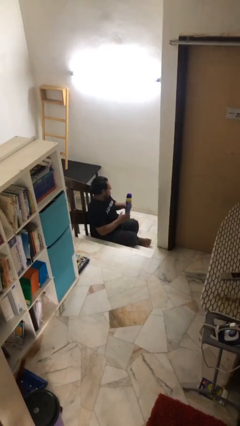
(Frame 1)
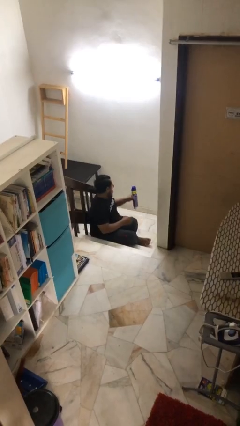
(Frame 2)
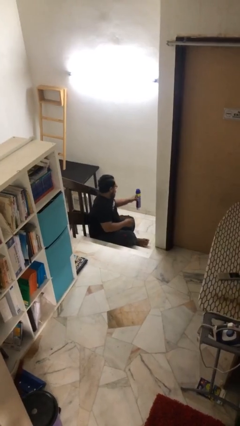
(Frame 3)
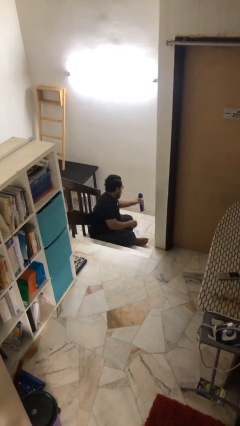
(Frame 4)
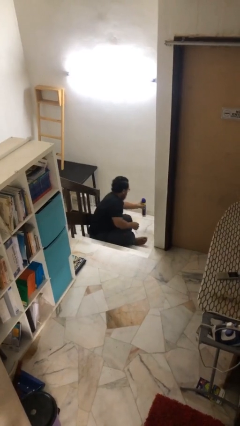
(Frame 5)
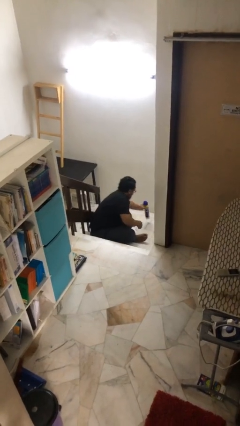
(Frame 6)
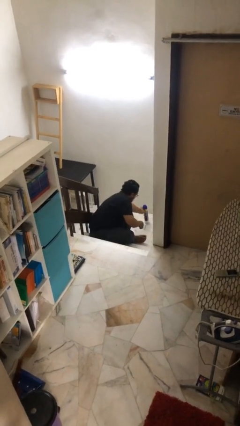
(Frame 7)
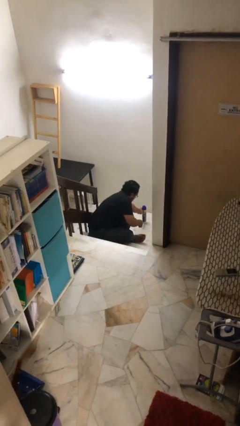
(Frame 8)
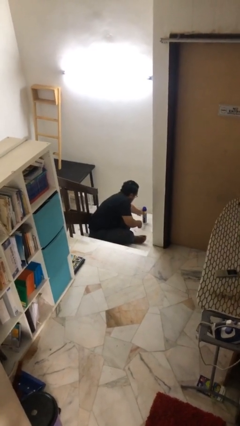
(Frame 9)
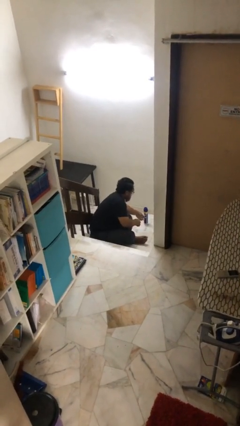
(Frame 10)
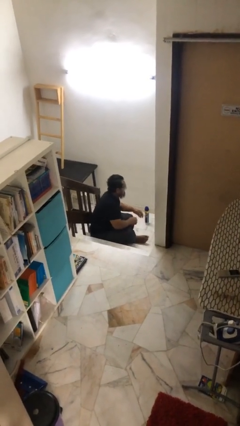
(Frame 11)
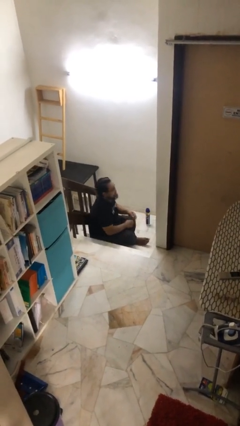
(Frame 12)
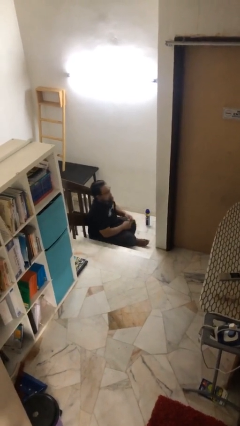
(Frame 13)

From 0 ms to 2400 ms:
person puts down object on floor

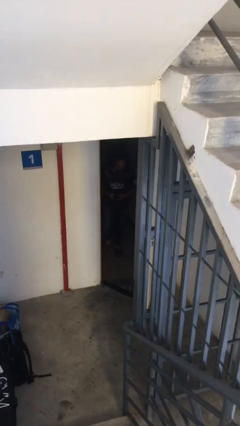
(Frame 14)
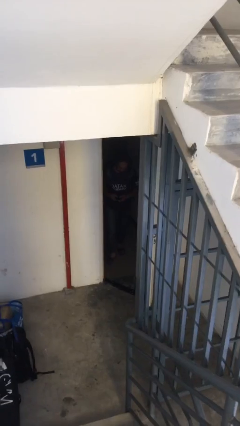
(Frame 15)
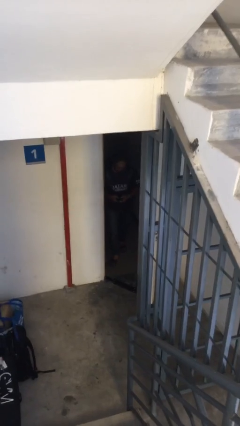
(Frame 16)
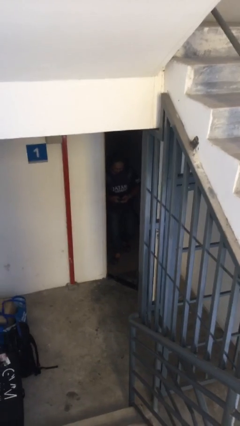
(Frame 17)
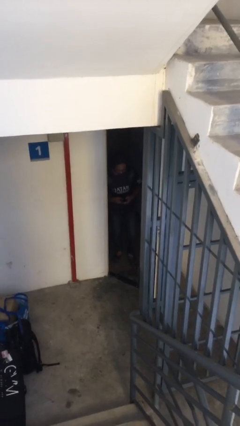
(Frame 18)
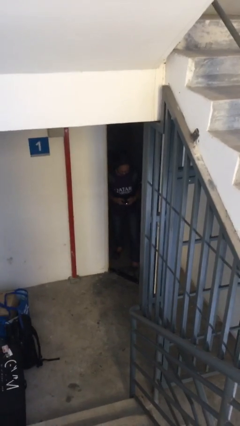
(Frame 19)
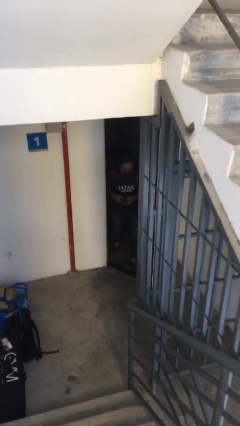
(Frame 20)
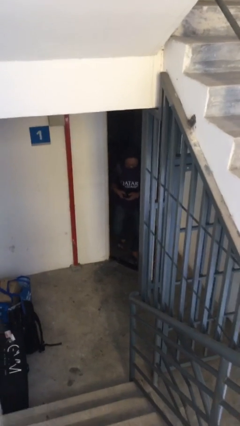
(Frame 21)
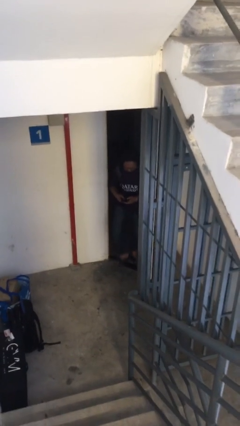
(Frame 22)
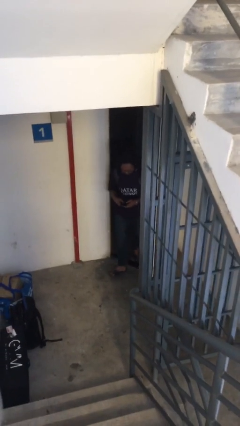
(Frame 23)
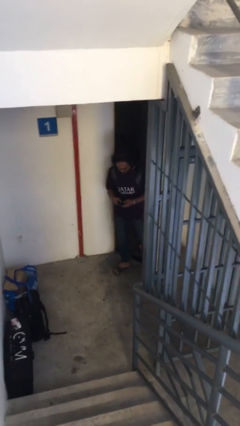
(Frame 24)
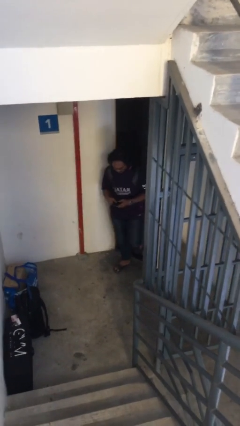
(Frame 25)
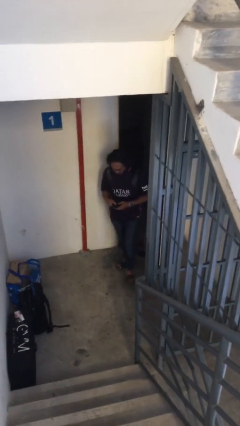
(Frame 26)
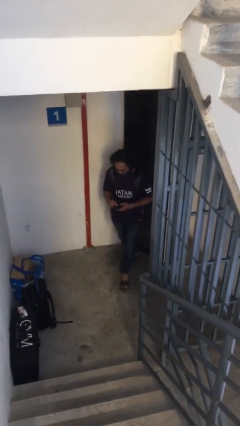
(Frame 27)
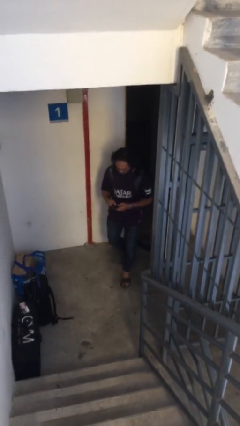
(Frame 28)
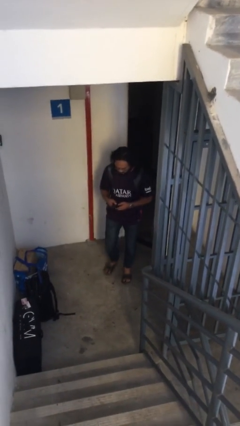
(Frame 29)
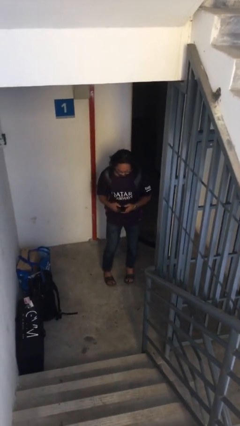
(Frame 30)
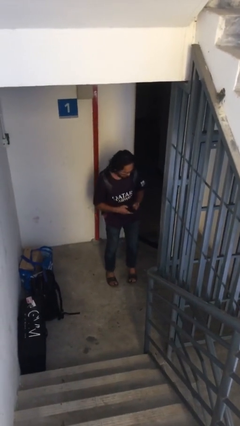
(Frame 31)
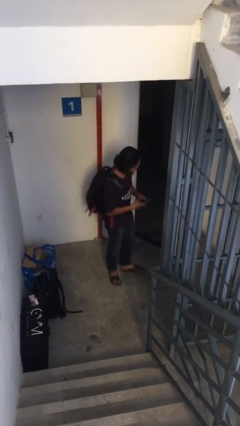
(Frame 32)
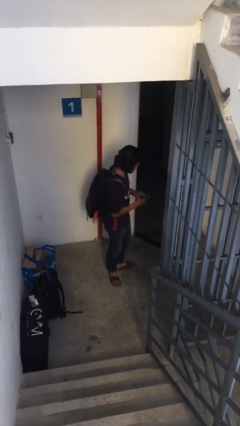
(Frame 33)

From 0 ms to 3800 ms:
person enters scene through structure

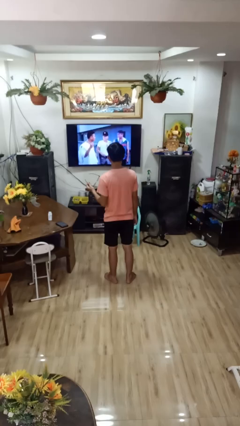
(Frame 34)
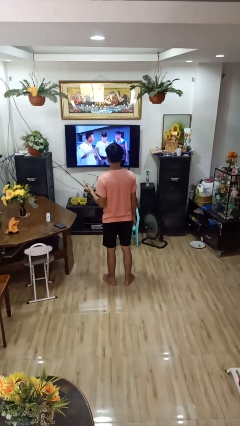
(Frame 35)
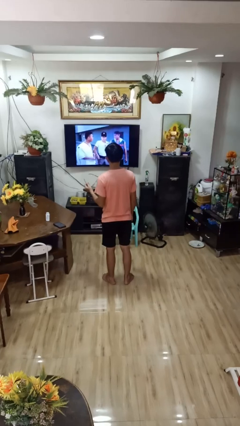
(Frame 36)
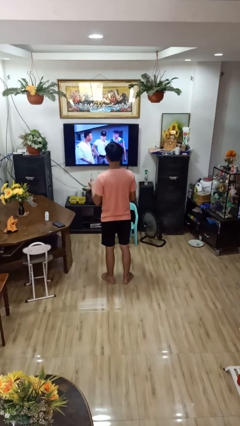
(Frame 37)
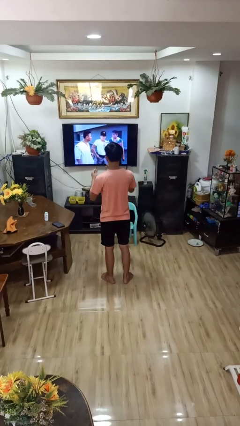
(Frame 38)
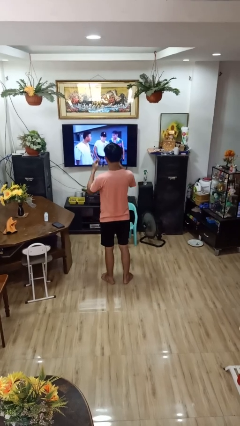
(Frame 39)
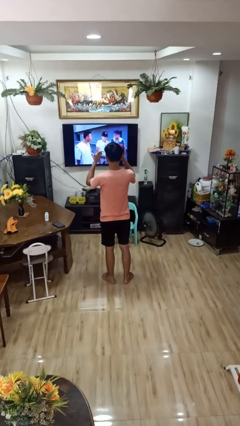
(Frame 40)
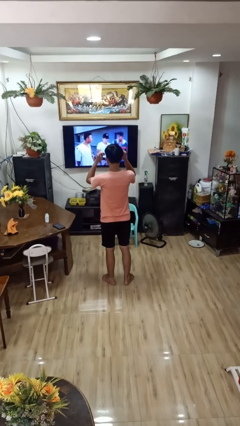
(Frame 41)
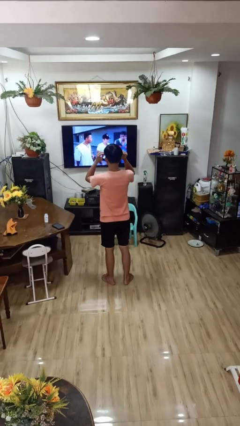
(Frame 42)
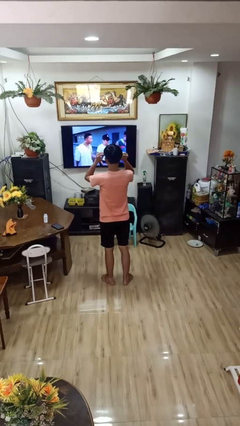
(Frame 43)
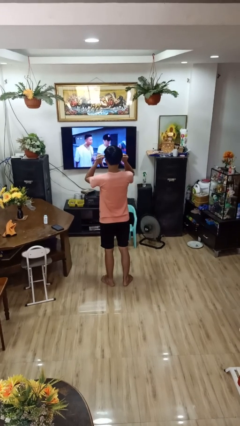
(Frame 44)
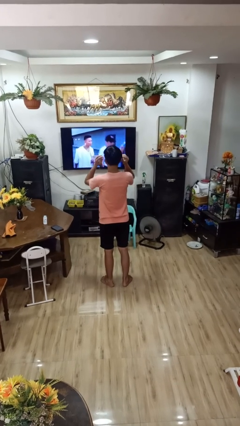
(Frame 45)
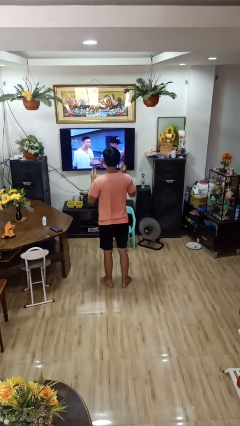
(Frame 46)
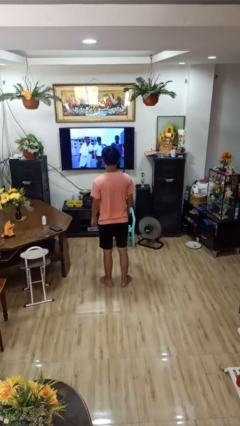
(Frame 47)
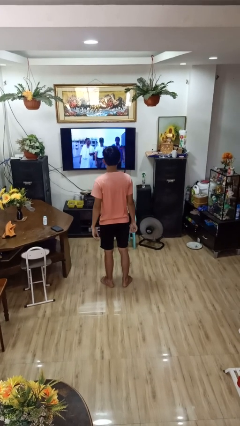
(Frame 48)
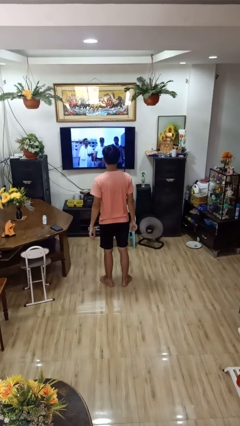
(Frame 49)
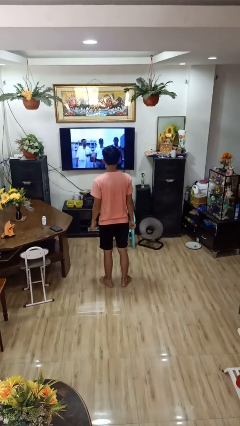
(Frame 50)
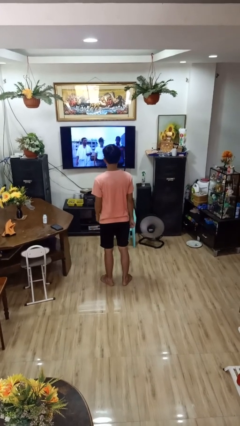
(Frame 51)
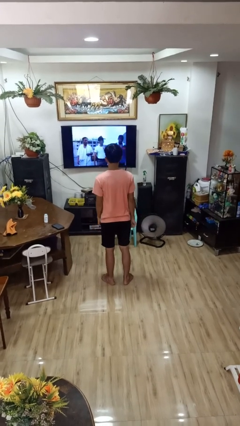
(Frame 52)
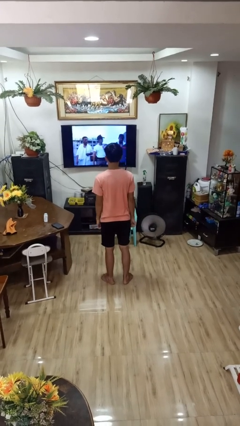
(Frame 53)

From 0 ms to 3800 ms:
person puts on glasses

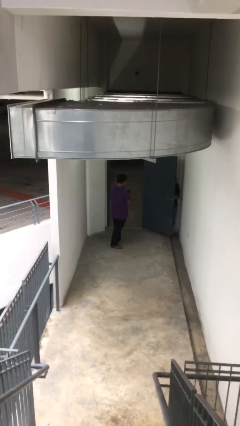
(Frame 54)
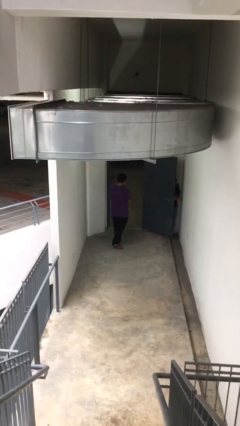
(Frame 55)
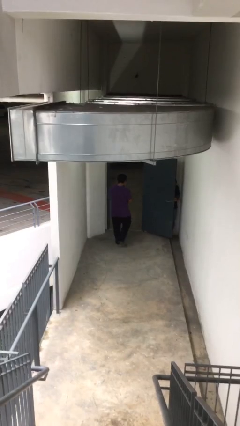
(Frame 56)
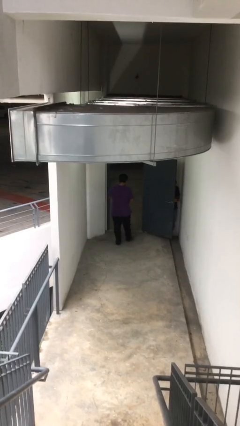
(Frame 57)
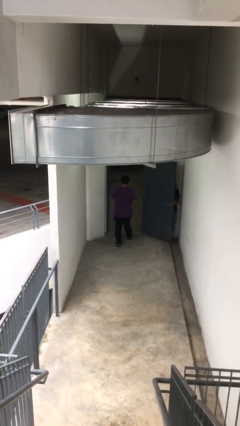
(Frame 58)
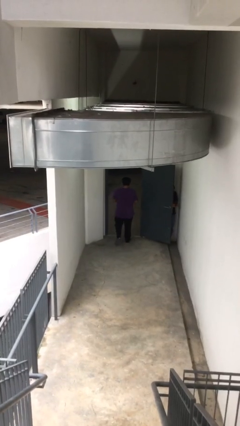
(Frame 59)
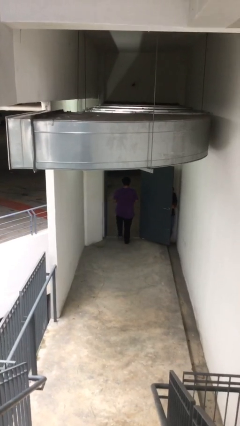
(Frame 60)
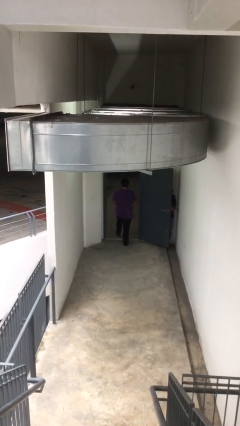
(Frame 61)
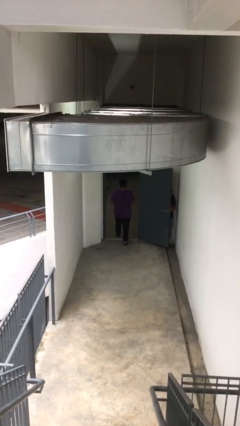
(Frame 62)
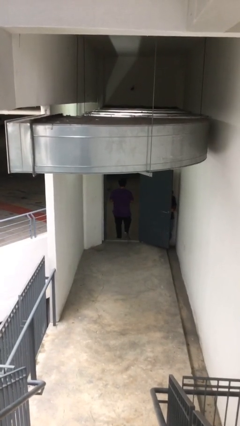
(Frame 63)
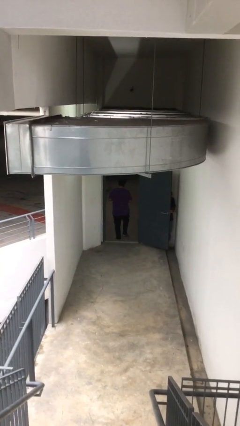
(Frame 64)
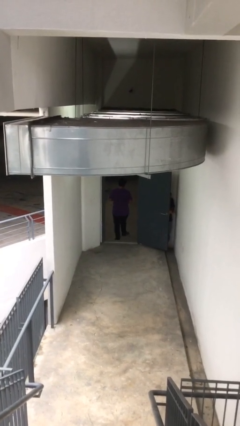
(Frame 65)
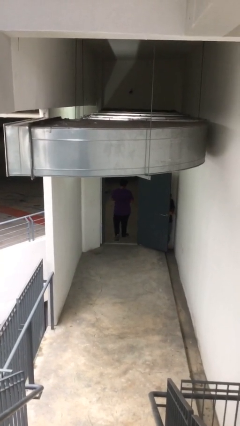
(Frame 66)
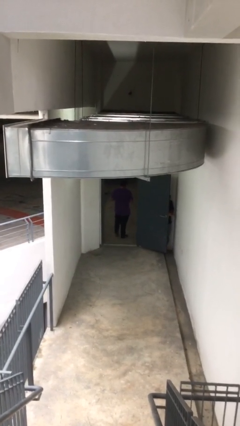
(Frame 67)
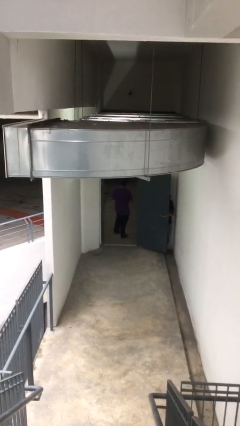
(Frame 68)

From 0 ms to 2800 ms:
person exits scene through structure

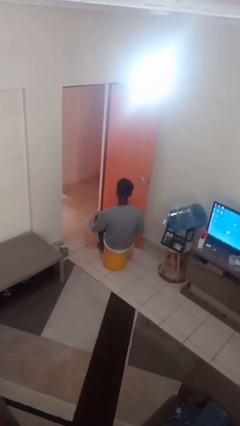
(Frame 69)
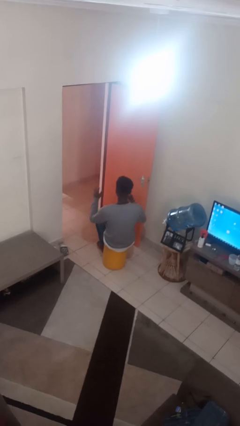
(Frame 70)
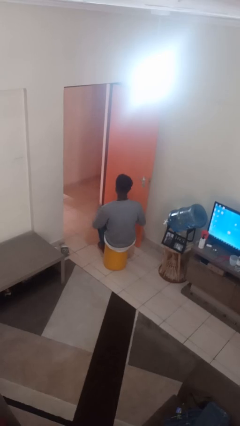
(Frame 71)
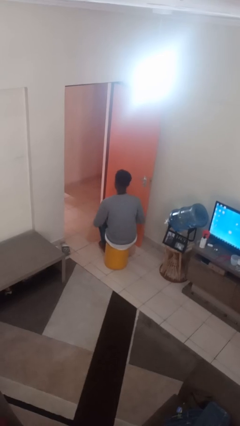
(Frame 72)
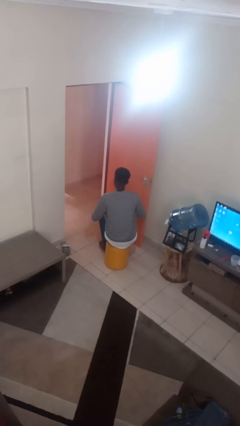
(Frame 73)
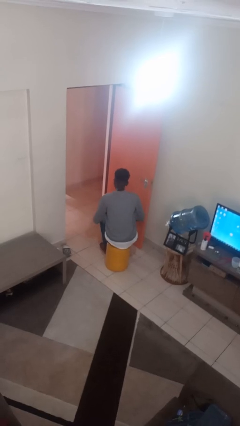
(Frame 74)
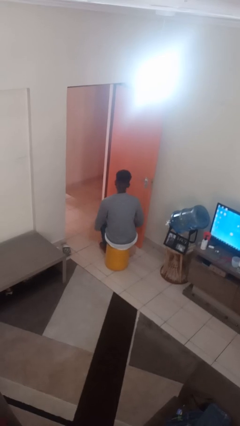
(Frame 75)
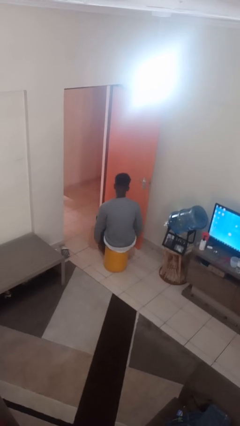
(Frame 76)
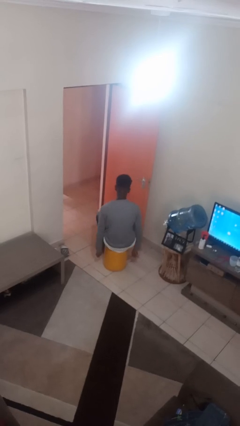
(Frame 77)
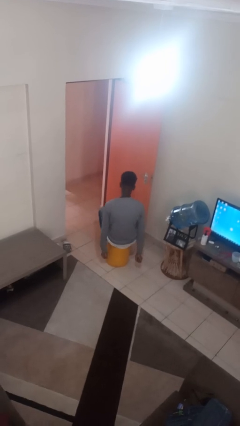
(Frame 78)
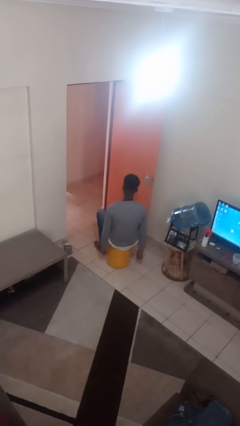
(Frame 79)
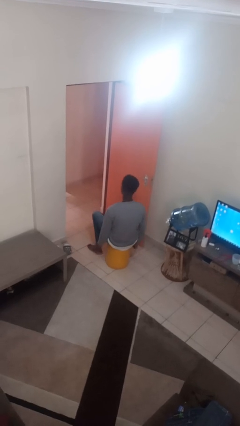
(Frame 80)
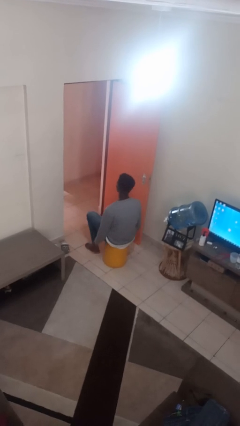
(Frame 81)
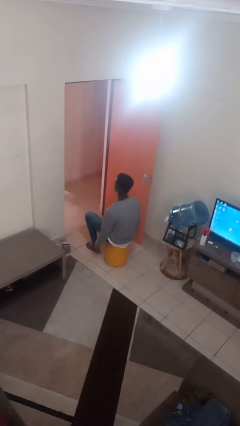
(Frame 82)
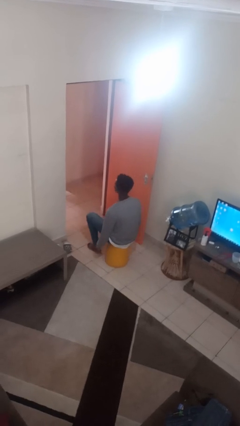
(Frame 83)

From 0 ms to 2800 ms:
person slaps hands on thighs

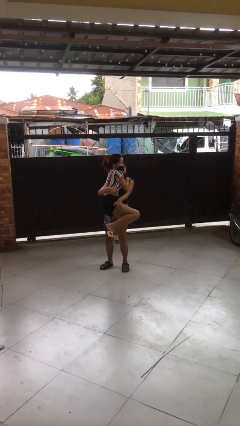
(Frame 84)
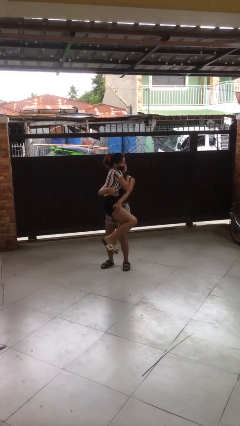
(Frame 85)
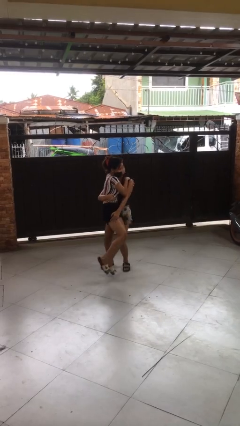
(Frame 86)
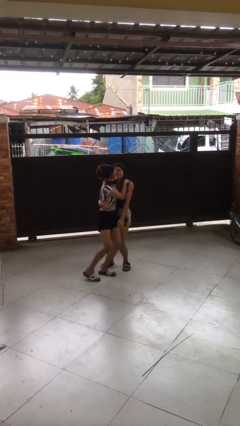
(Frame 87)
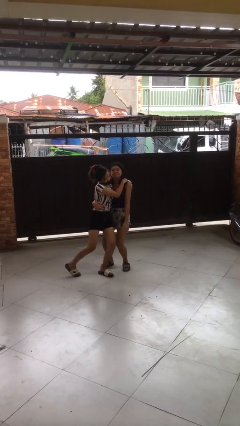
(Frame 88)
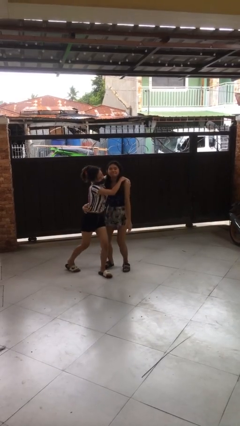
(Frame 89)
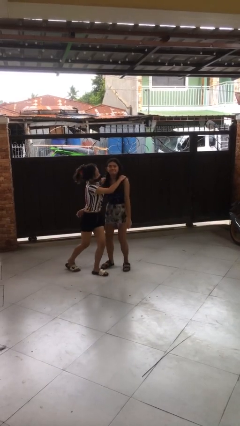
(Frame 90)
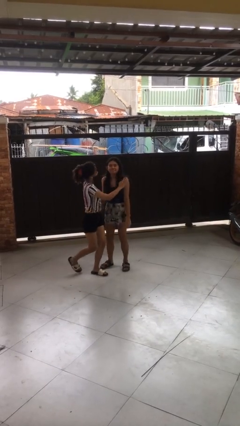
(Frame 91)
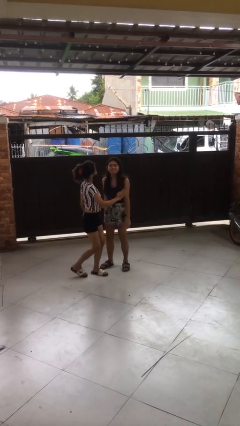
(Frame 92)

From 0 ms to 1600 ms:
person puts down person

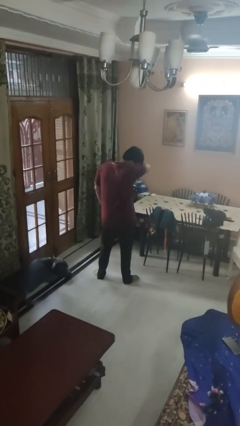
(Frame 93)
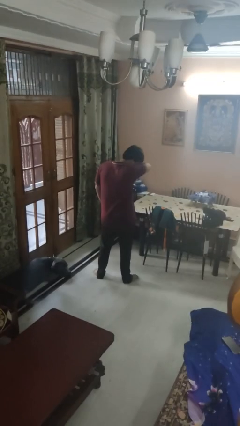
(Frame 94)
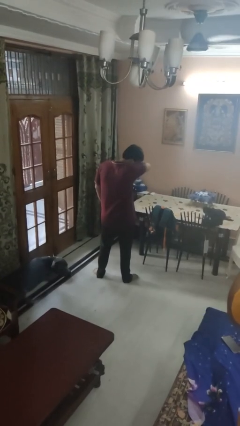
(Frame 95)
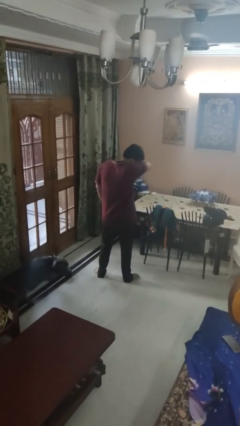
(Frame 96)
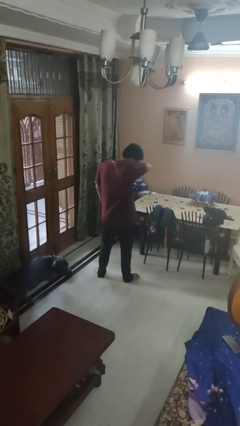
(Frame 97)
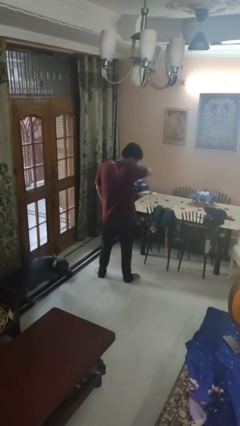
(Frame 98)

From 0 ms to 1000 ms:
person sneezes into arm
